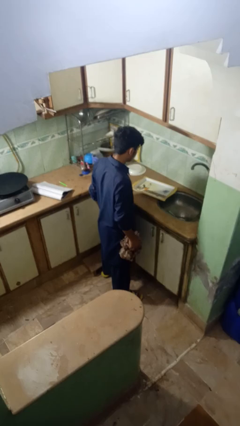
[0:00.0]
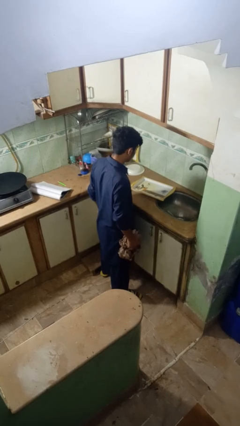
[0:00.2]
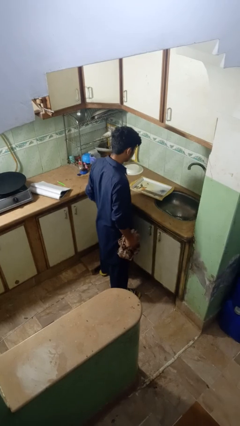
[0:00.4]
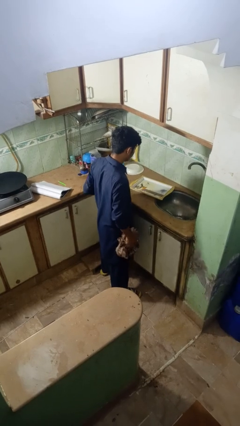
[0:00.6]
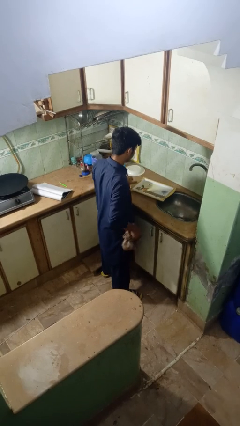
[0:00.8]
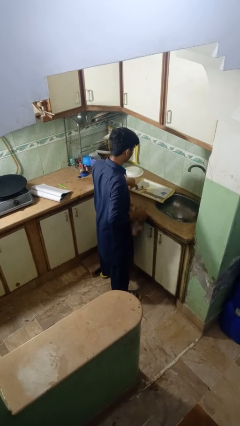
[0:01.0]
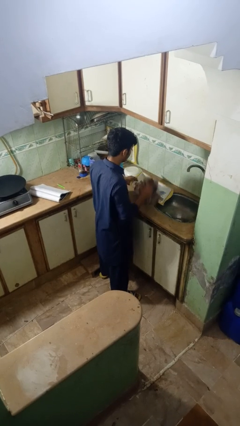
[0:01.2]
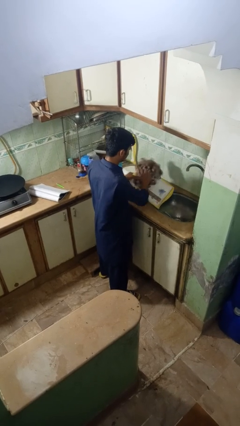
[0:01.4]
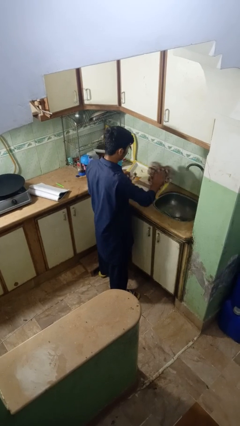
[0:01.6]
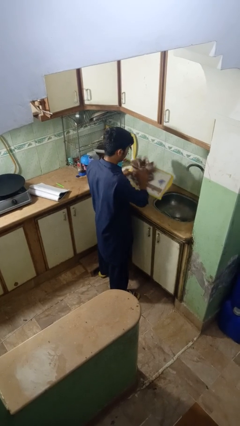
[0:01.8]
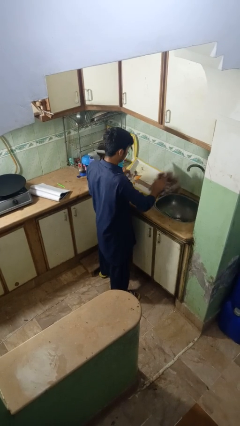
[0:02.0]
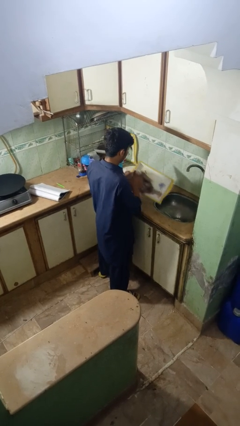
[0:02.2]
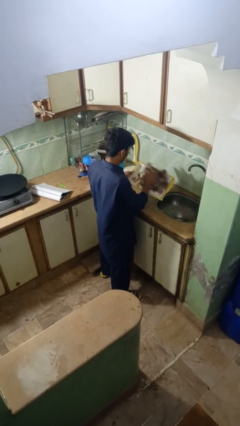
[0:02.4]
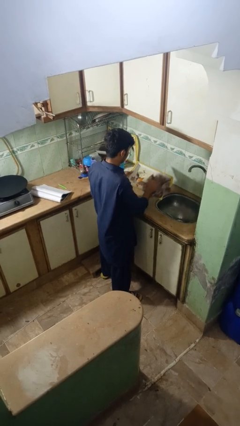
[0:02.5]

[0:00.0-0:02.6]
person dries dish

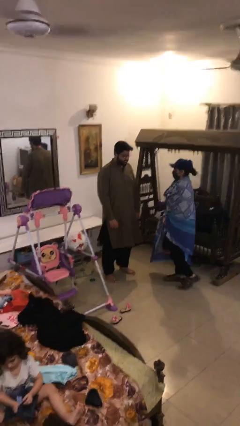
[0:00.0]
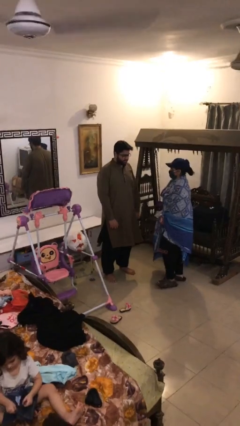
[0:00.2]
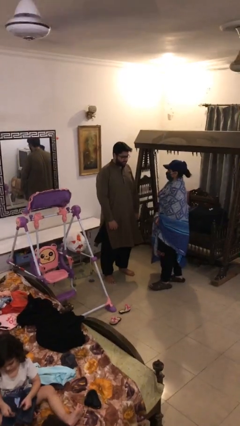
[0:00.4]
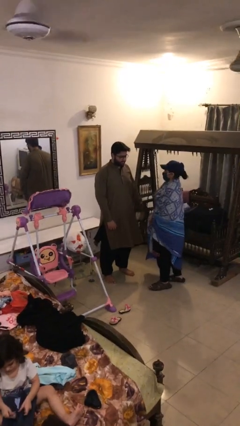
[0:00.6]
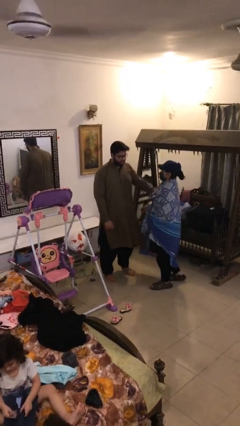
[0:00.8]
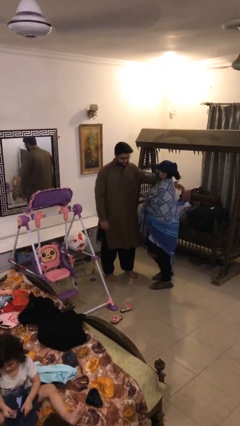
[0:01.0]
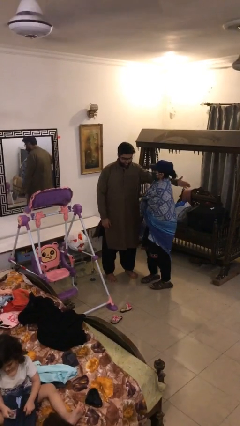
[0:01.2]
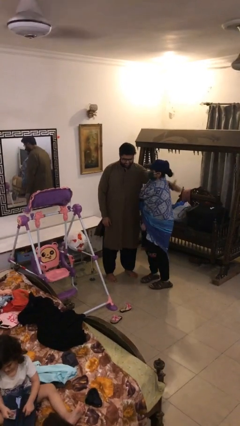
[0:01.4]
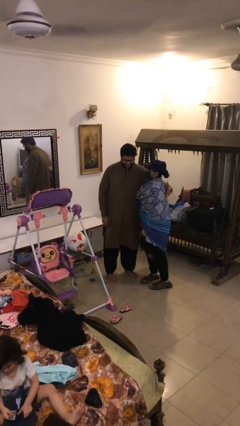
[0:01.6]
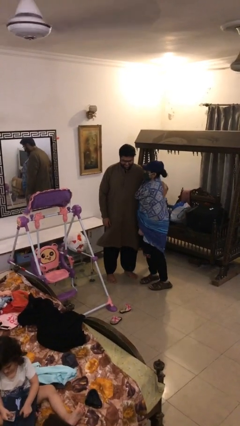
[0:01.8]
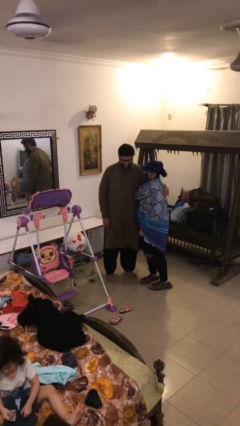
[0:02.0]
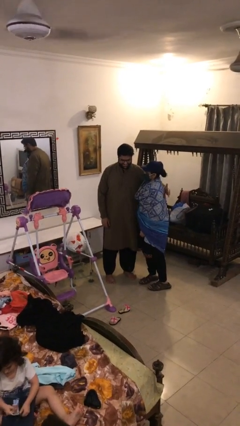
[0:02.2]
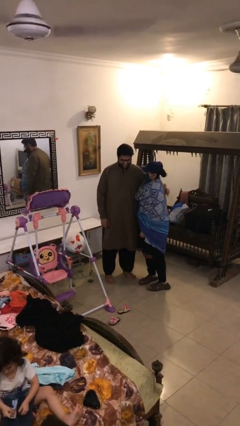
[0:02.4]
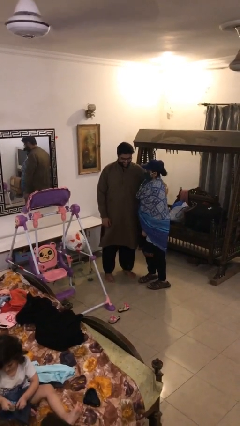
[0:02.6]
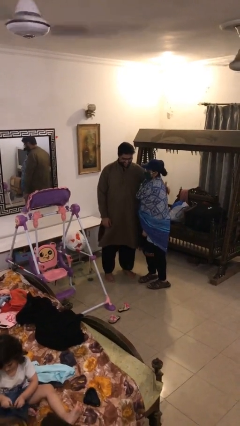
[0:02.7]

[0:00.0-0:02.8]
person embraces person

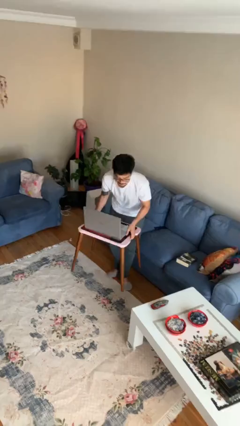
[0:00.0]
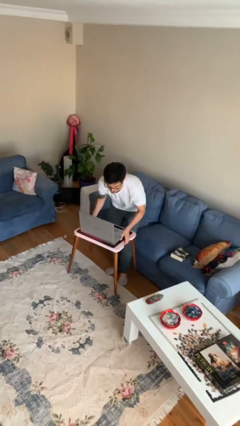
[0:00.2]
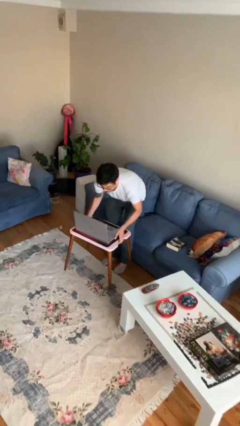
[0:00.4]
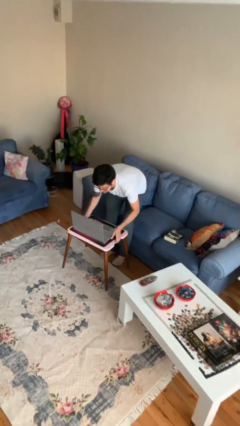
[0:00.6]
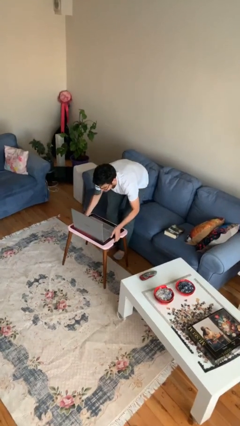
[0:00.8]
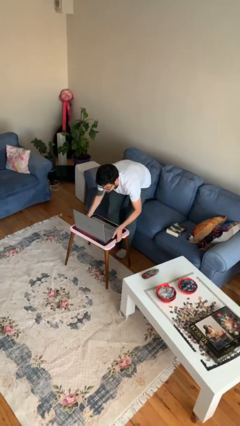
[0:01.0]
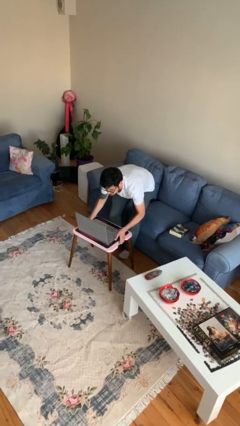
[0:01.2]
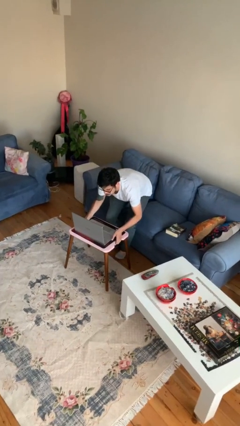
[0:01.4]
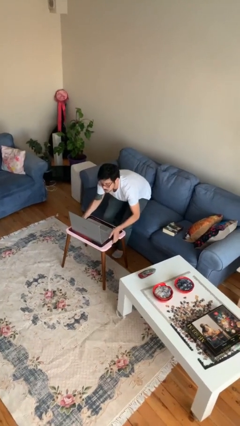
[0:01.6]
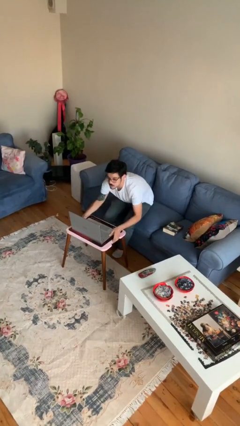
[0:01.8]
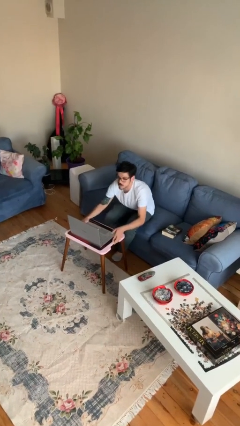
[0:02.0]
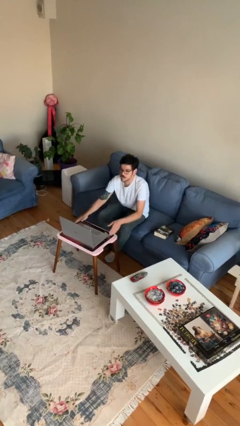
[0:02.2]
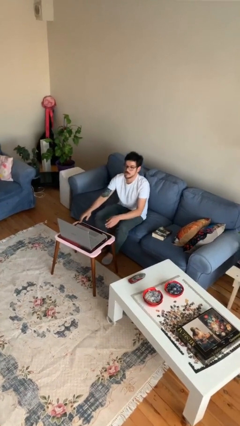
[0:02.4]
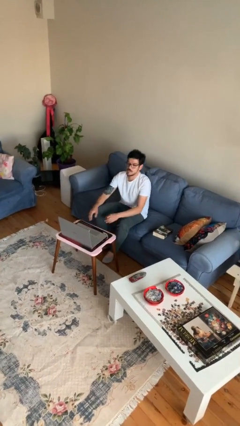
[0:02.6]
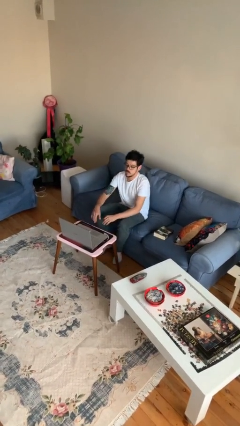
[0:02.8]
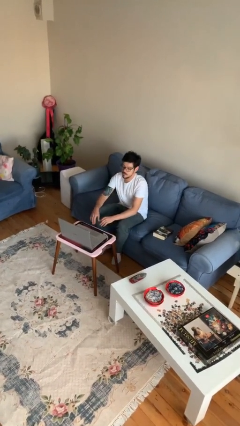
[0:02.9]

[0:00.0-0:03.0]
person puts down object on floor

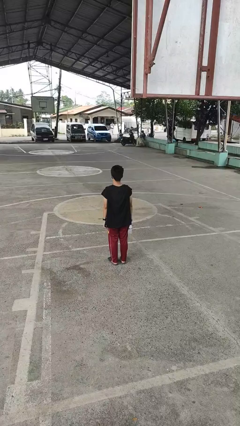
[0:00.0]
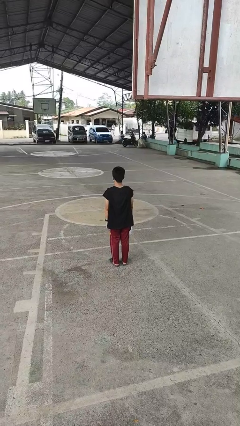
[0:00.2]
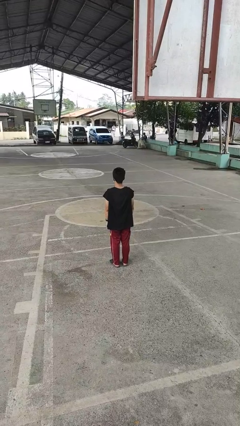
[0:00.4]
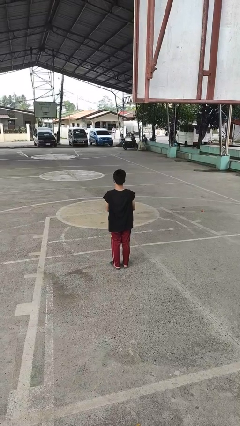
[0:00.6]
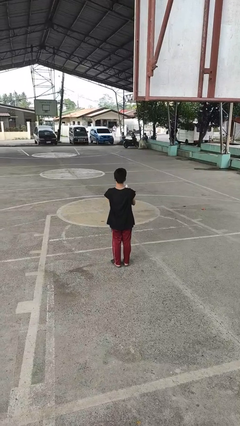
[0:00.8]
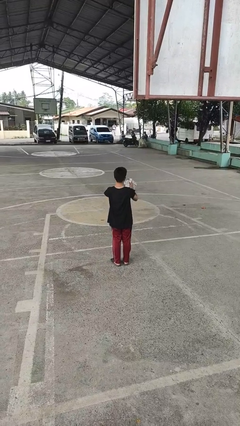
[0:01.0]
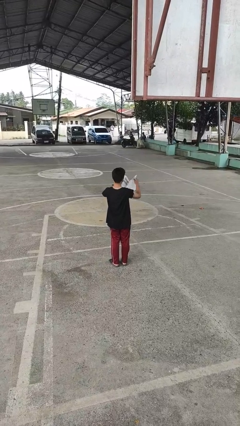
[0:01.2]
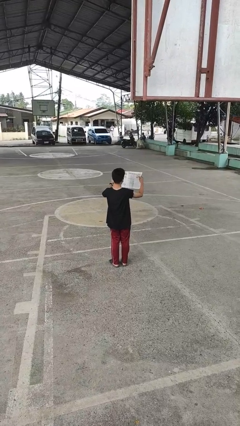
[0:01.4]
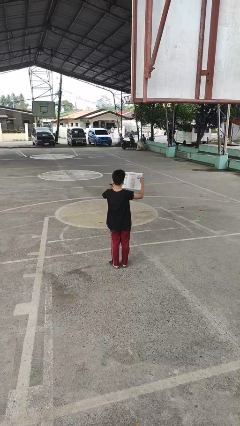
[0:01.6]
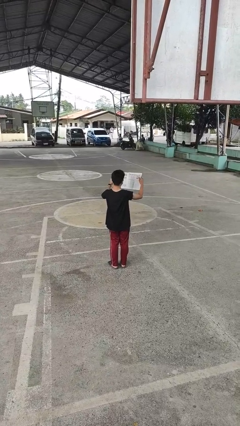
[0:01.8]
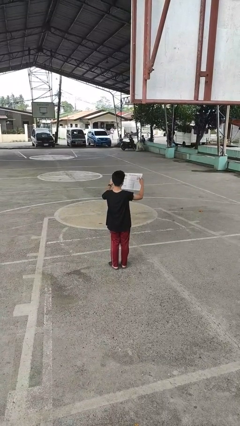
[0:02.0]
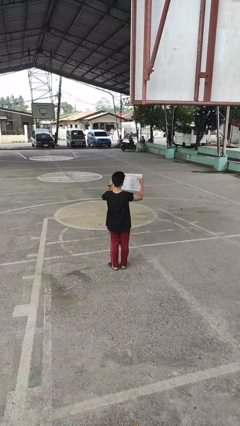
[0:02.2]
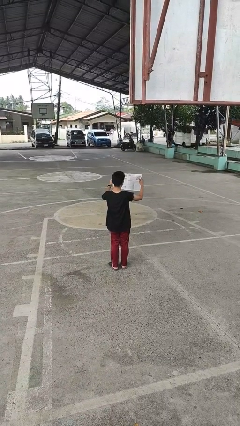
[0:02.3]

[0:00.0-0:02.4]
person reads newspaper

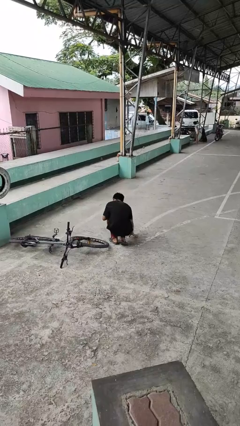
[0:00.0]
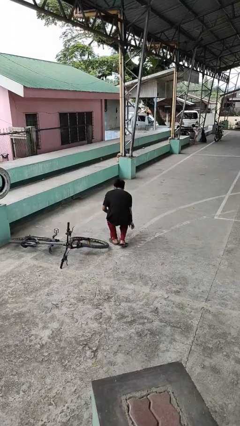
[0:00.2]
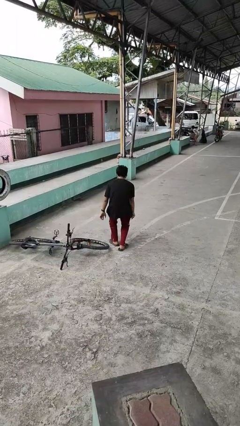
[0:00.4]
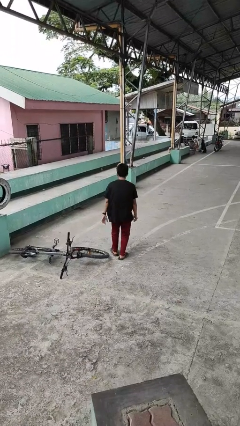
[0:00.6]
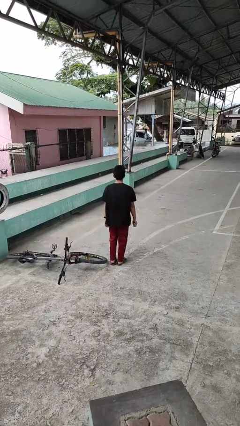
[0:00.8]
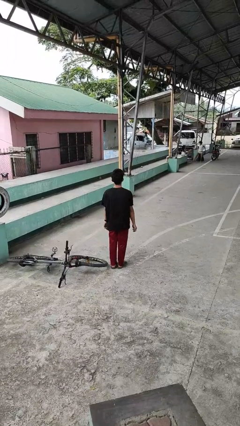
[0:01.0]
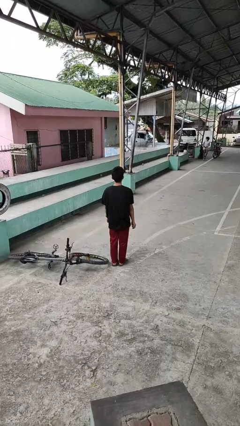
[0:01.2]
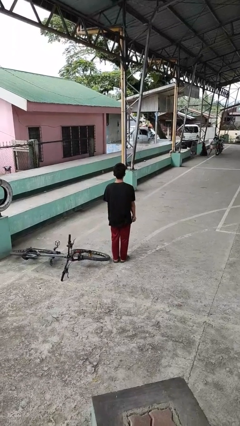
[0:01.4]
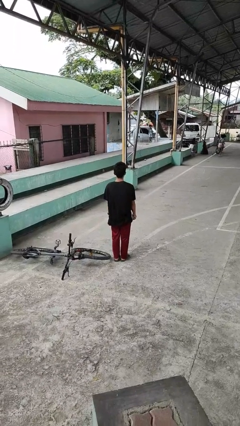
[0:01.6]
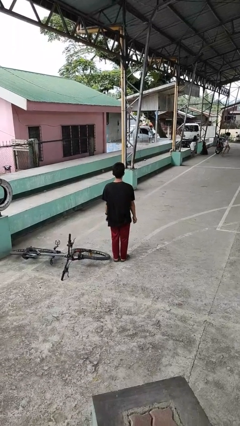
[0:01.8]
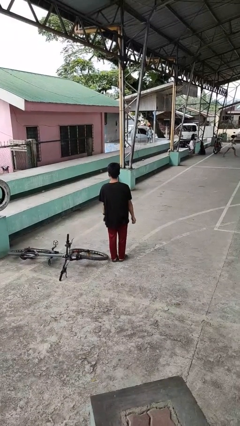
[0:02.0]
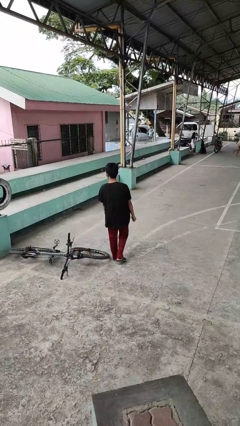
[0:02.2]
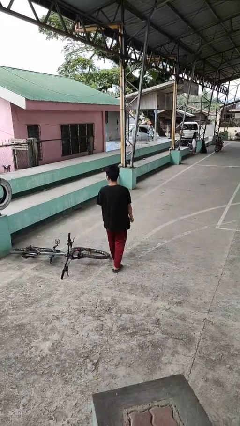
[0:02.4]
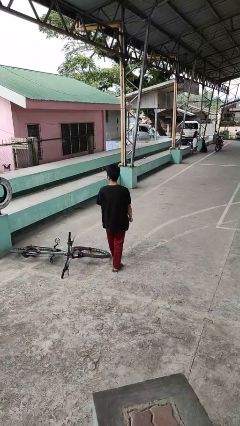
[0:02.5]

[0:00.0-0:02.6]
person stands up from floor

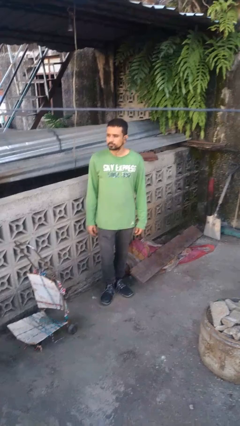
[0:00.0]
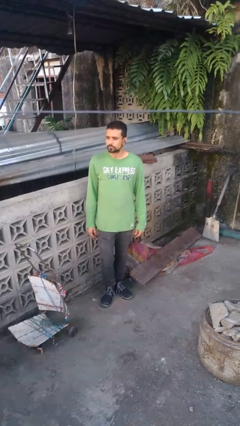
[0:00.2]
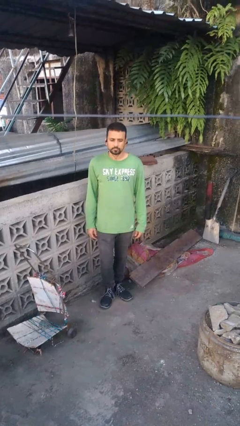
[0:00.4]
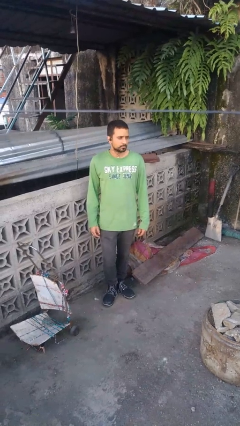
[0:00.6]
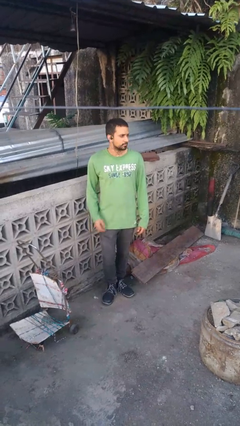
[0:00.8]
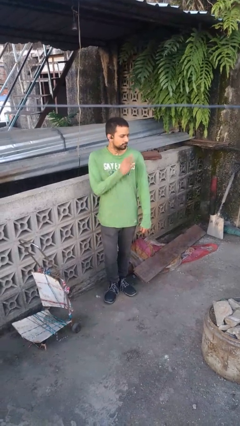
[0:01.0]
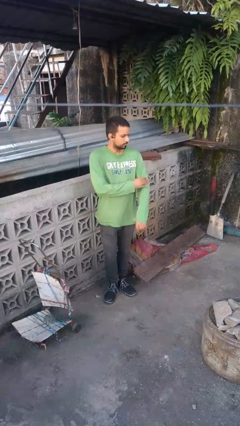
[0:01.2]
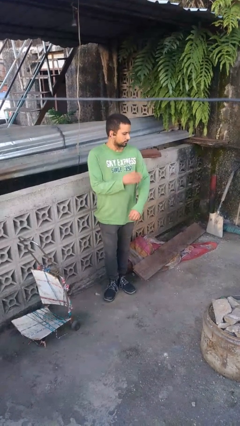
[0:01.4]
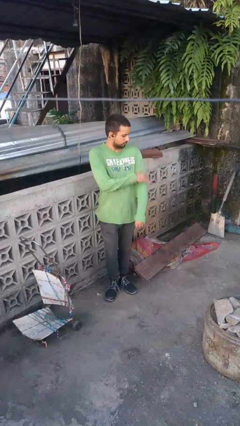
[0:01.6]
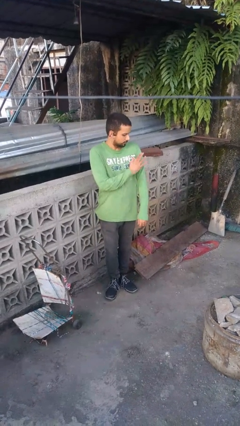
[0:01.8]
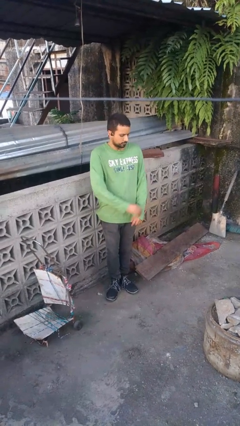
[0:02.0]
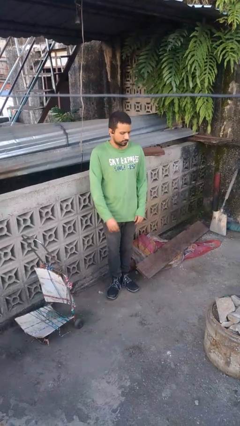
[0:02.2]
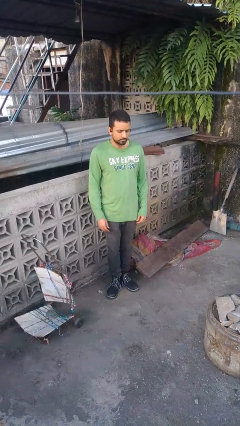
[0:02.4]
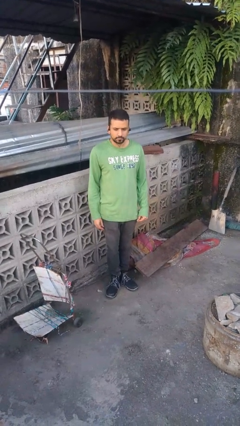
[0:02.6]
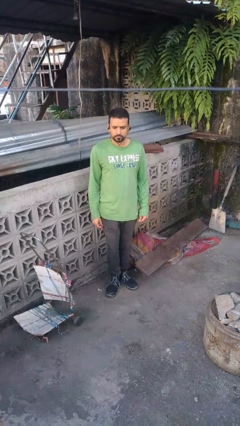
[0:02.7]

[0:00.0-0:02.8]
person swats bug

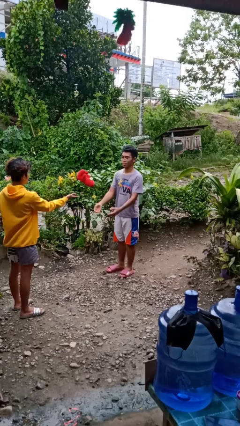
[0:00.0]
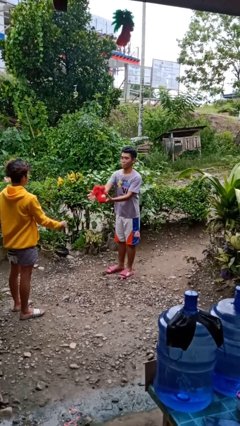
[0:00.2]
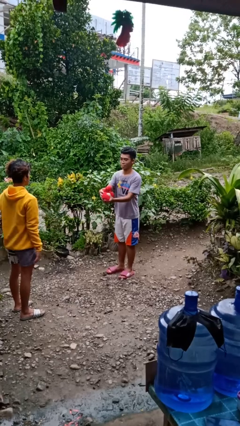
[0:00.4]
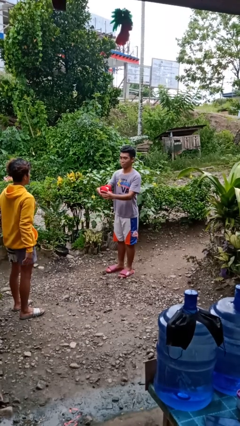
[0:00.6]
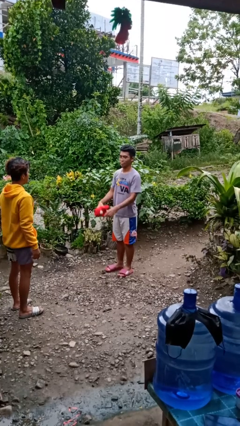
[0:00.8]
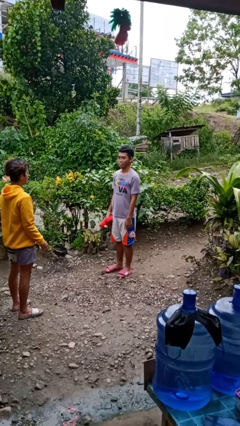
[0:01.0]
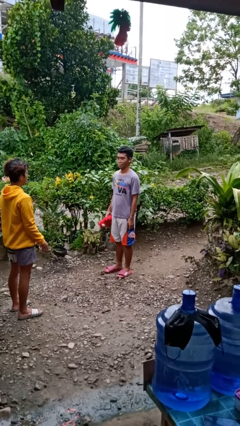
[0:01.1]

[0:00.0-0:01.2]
person catches object from person
